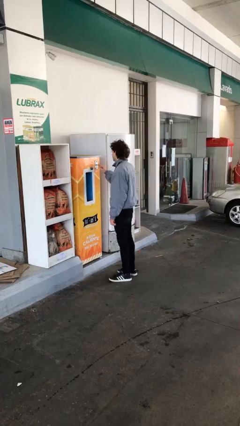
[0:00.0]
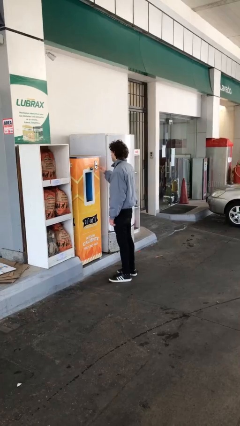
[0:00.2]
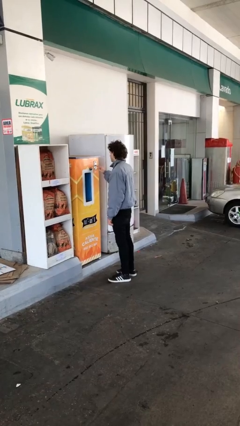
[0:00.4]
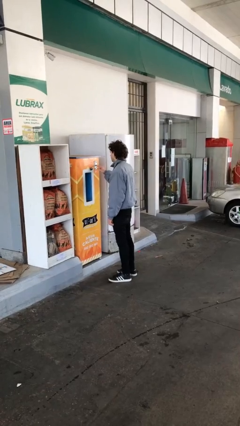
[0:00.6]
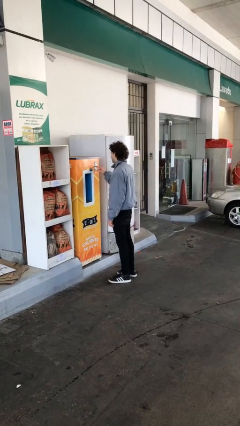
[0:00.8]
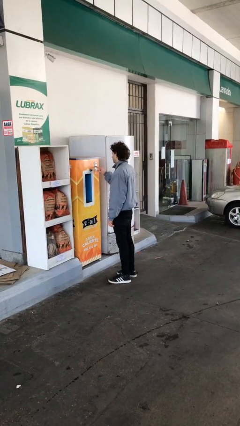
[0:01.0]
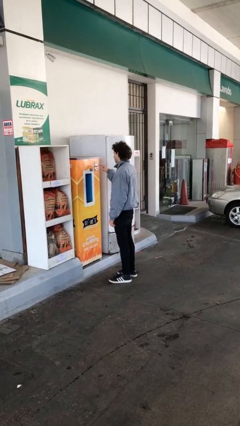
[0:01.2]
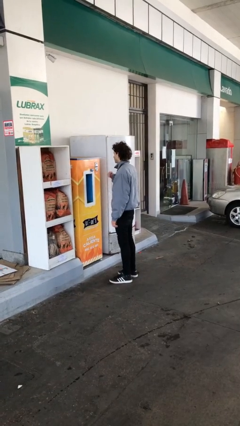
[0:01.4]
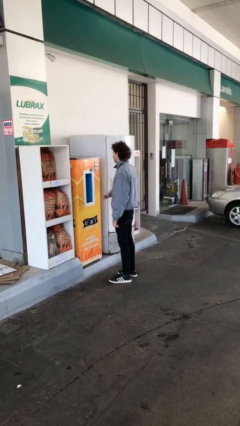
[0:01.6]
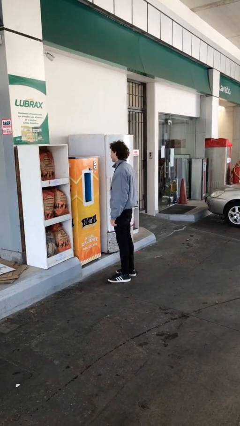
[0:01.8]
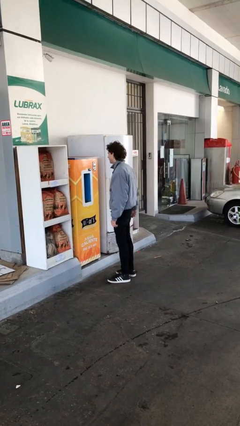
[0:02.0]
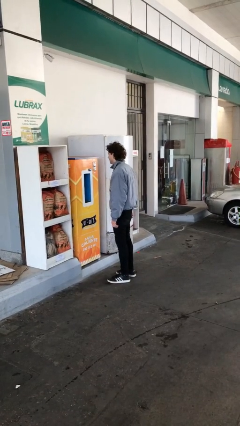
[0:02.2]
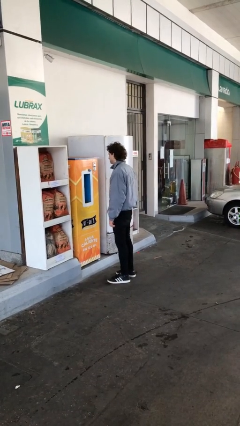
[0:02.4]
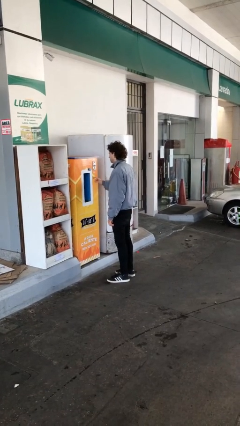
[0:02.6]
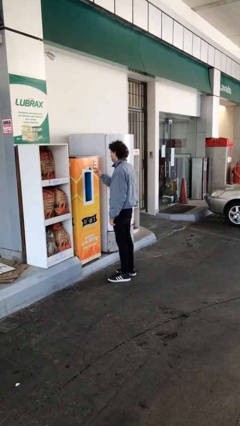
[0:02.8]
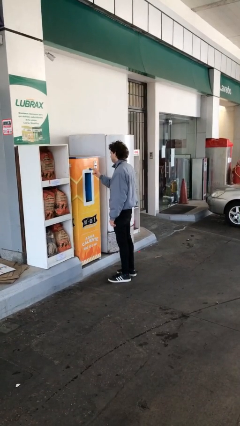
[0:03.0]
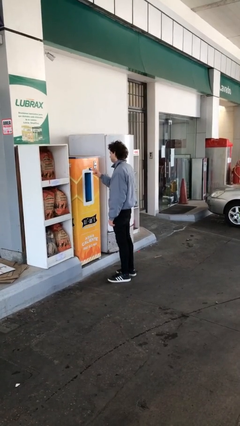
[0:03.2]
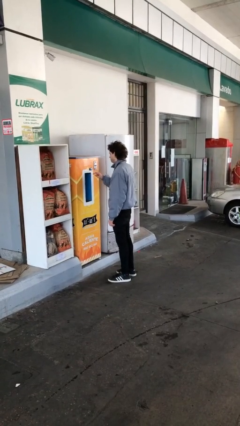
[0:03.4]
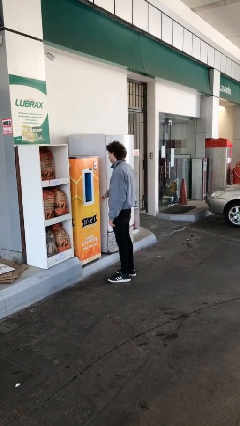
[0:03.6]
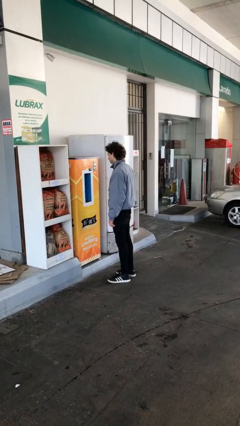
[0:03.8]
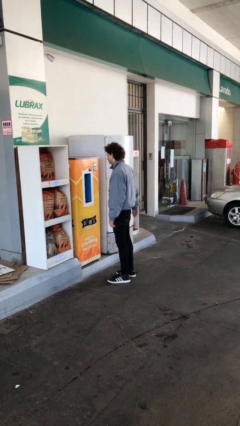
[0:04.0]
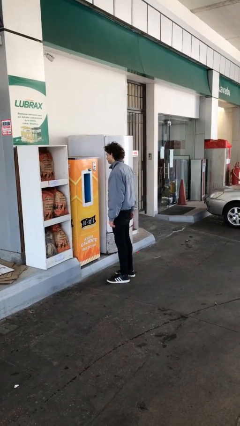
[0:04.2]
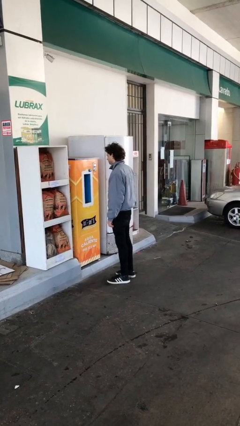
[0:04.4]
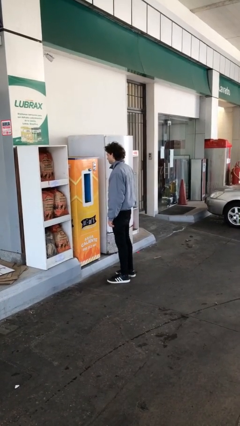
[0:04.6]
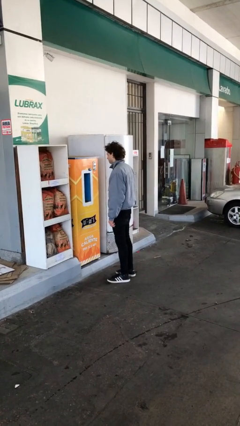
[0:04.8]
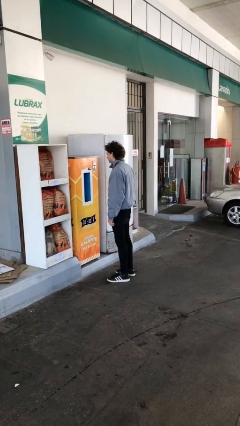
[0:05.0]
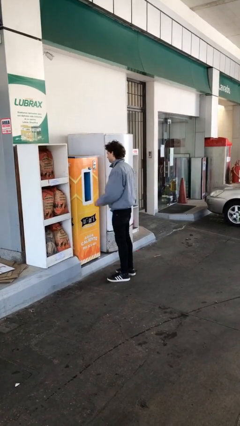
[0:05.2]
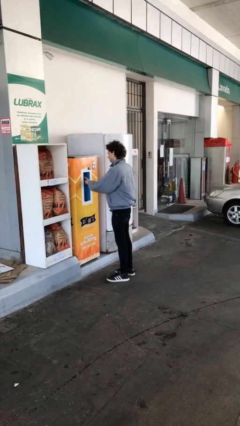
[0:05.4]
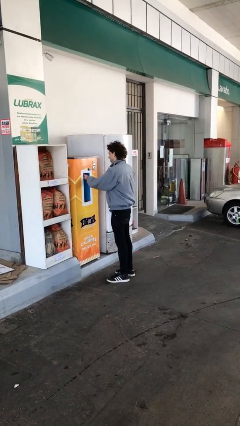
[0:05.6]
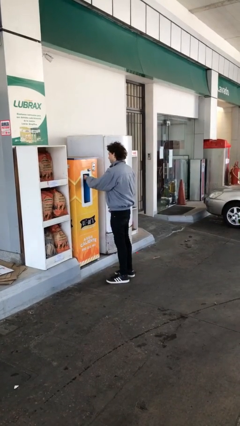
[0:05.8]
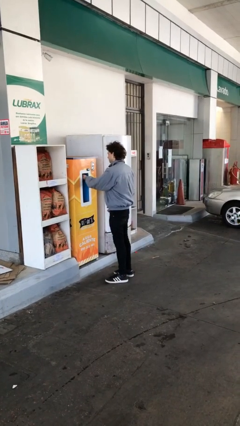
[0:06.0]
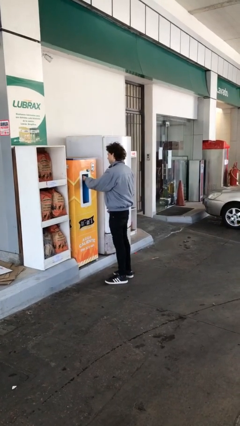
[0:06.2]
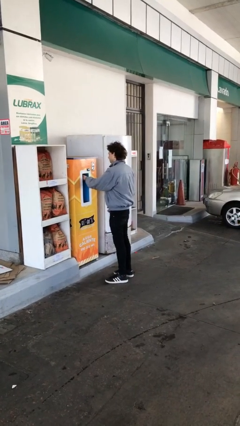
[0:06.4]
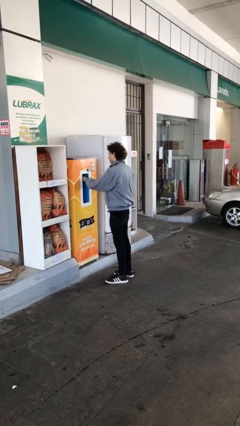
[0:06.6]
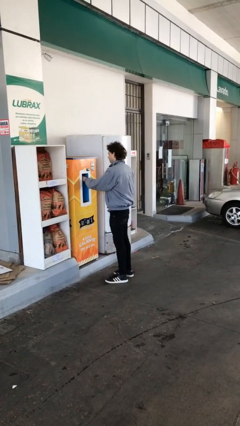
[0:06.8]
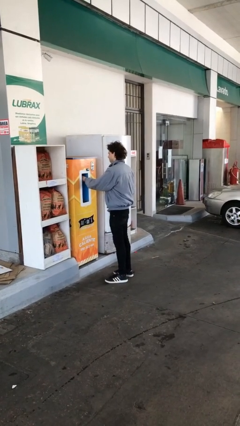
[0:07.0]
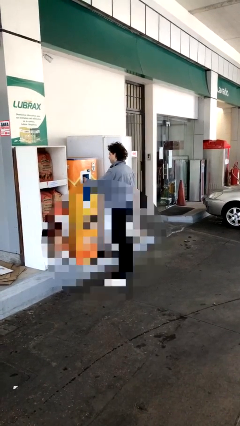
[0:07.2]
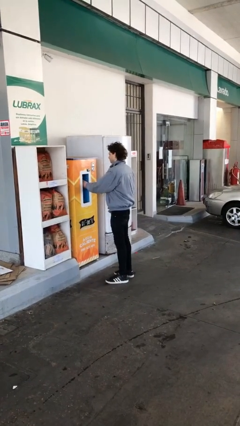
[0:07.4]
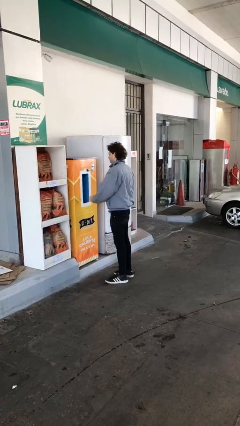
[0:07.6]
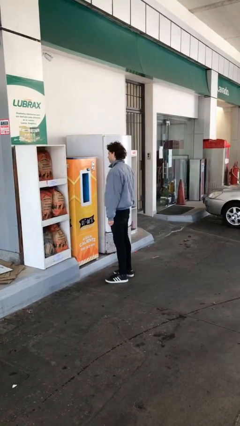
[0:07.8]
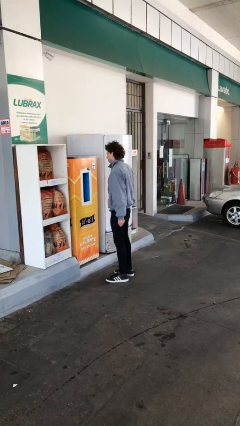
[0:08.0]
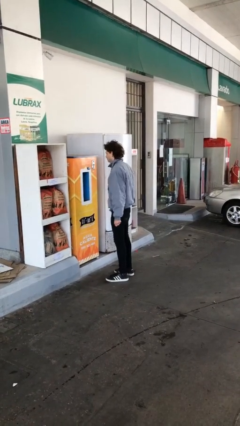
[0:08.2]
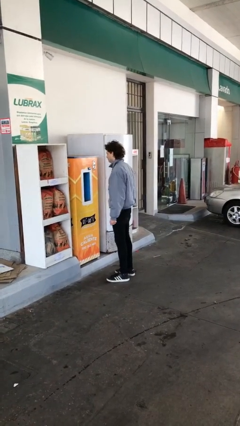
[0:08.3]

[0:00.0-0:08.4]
person purchases from machine

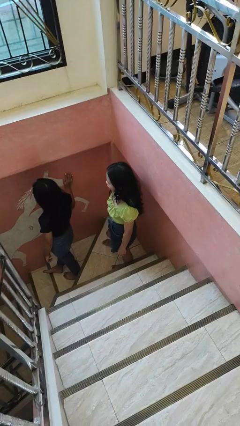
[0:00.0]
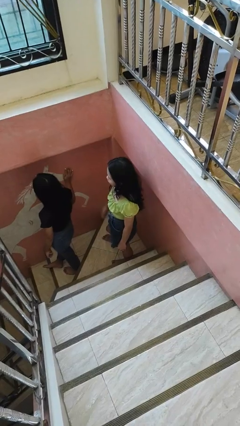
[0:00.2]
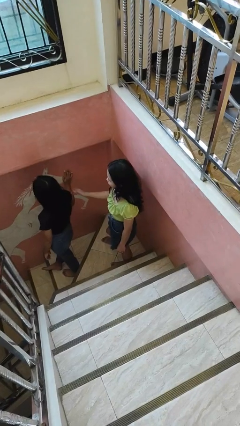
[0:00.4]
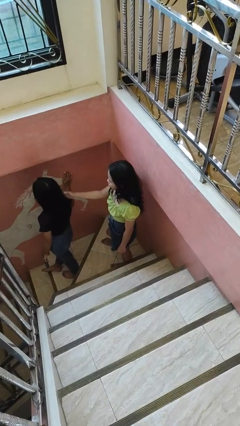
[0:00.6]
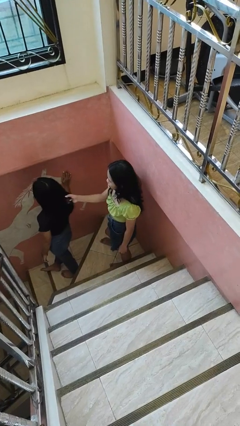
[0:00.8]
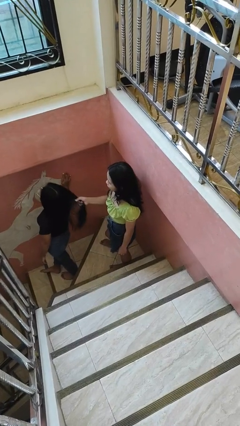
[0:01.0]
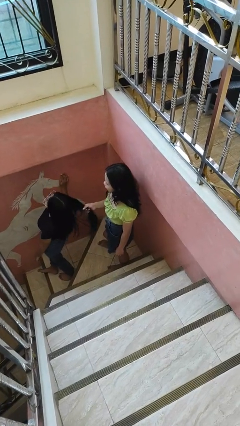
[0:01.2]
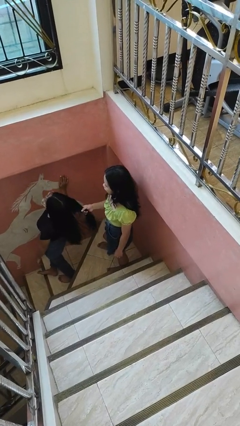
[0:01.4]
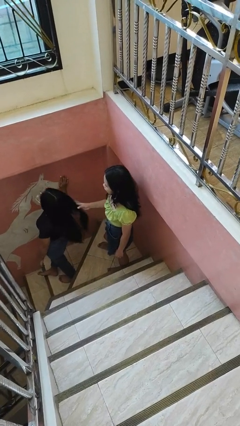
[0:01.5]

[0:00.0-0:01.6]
person grabs person by hair

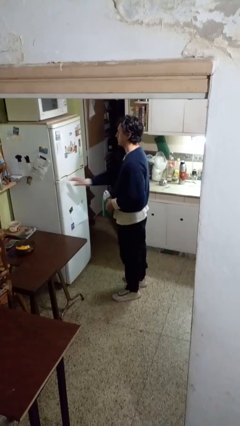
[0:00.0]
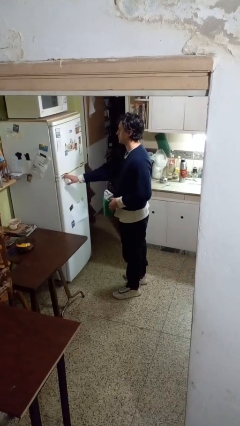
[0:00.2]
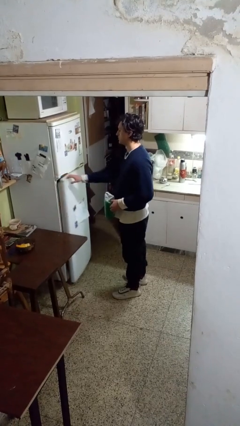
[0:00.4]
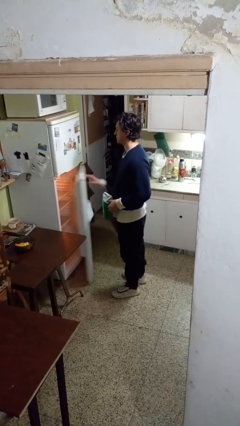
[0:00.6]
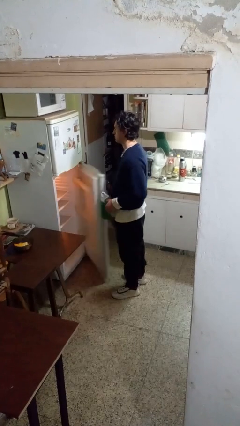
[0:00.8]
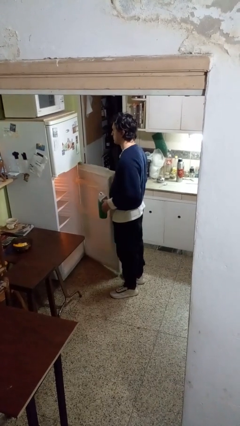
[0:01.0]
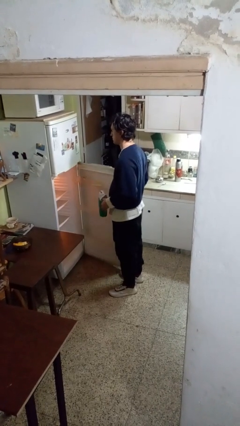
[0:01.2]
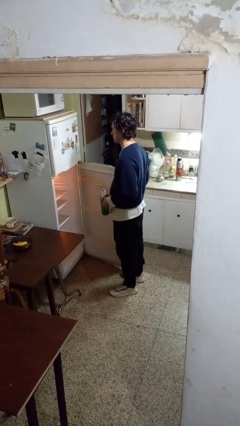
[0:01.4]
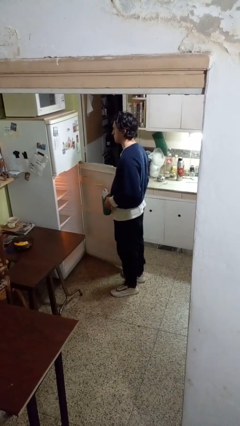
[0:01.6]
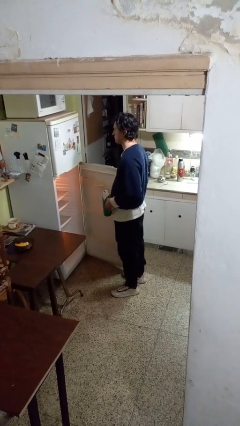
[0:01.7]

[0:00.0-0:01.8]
person opens refrigerator

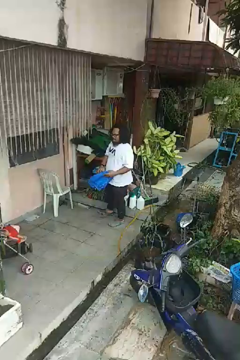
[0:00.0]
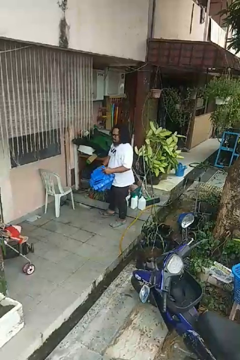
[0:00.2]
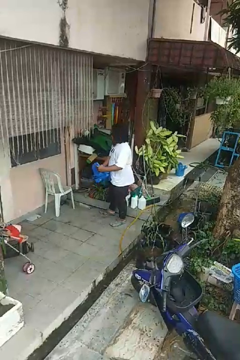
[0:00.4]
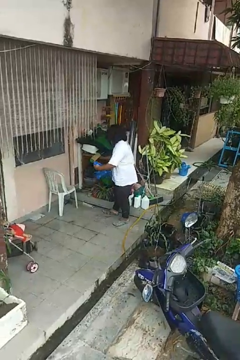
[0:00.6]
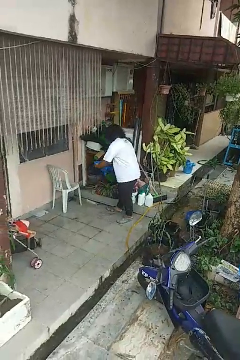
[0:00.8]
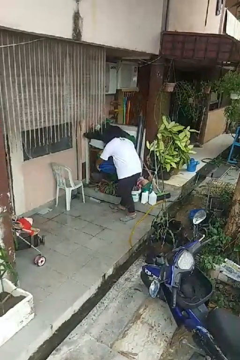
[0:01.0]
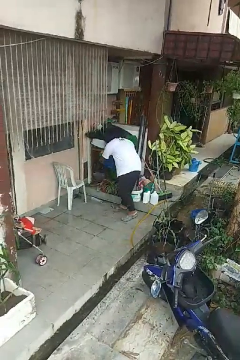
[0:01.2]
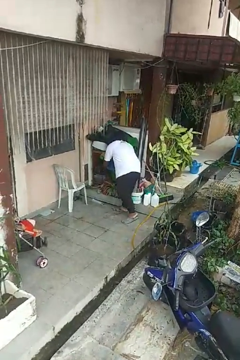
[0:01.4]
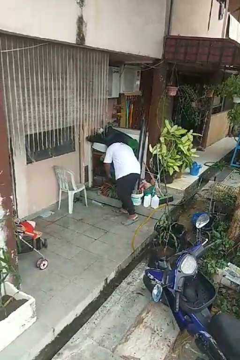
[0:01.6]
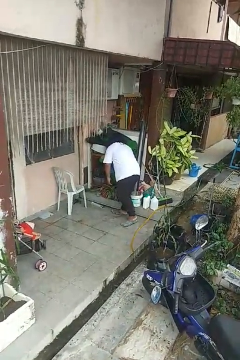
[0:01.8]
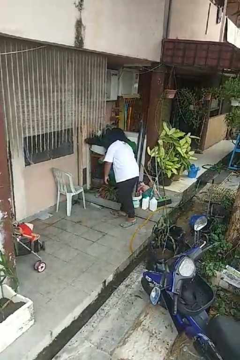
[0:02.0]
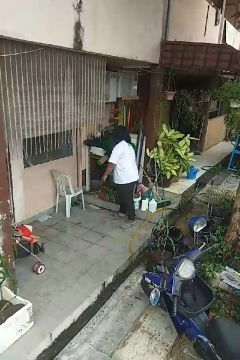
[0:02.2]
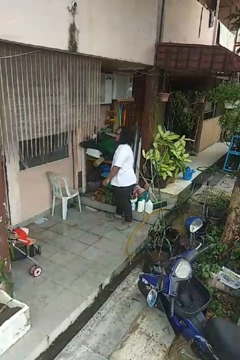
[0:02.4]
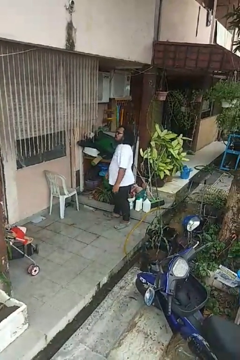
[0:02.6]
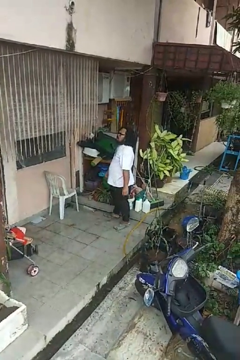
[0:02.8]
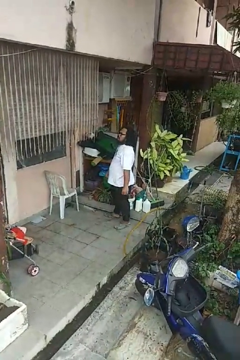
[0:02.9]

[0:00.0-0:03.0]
person puts down object into cabinet

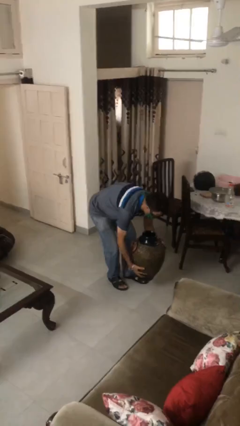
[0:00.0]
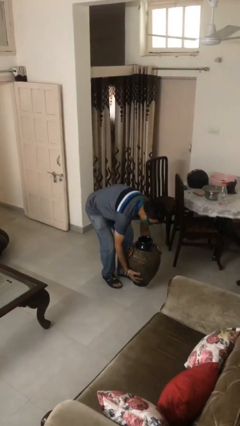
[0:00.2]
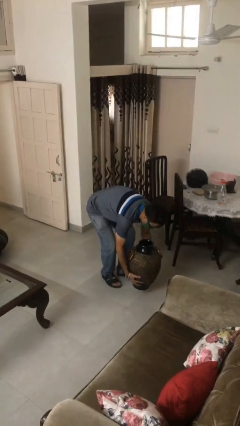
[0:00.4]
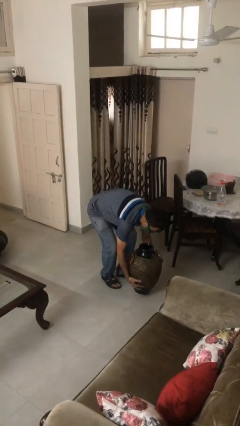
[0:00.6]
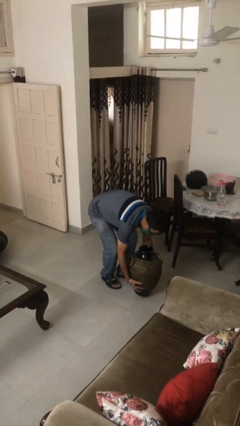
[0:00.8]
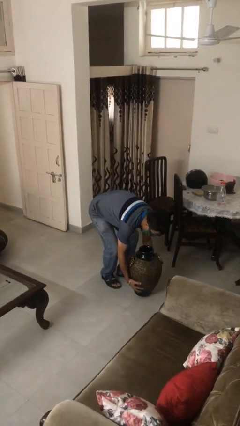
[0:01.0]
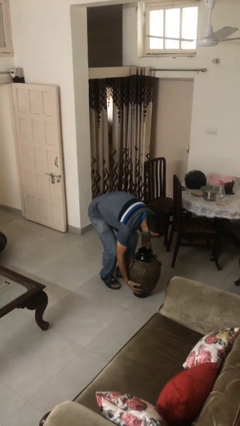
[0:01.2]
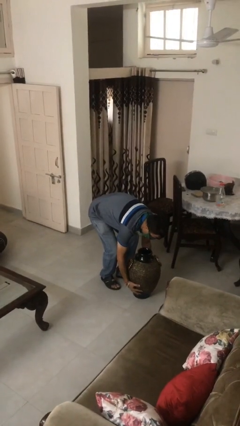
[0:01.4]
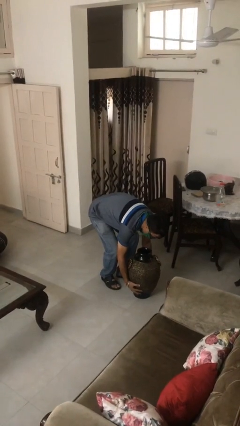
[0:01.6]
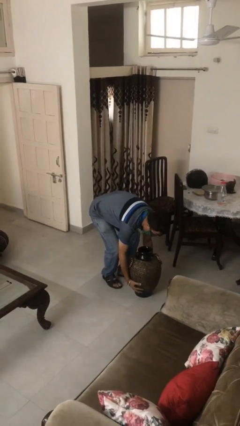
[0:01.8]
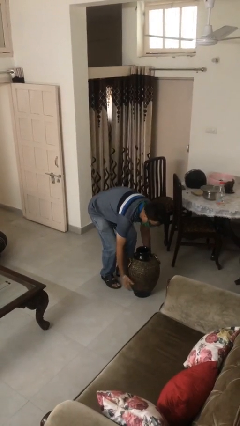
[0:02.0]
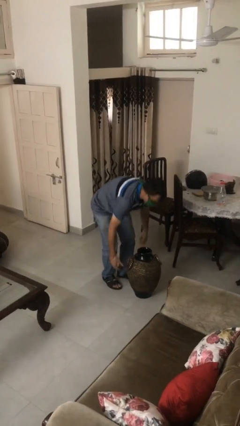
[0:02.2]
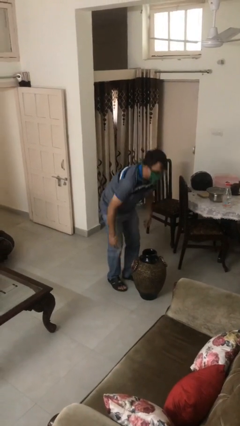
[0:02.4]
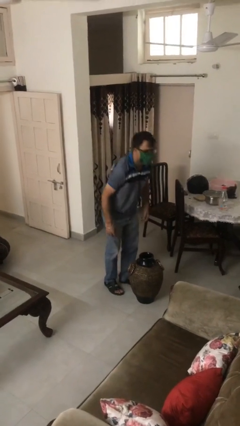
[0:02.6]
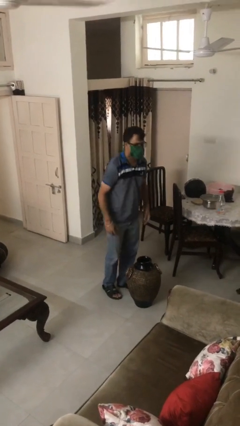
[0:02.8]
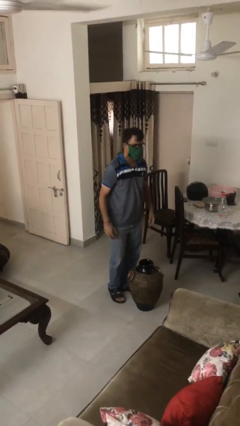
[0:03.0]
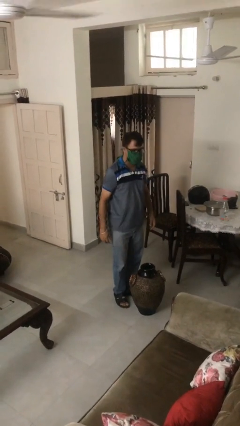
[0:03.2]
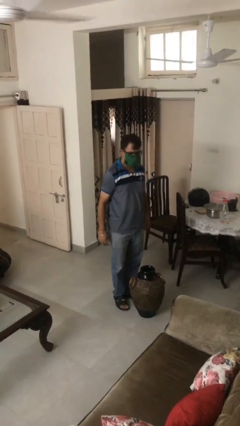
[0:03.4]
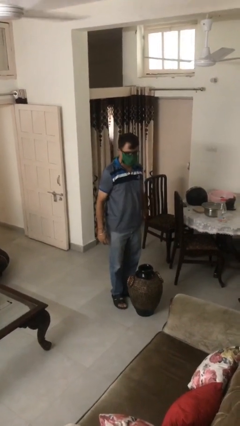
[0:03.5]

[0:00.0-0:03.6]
person puts down object on floor
